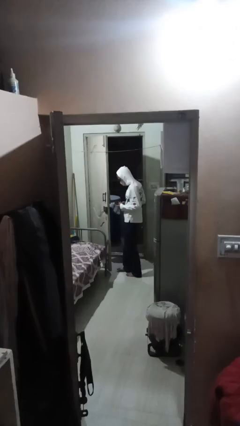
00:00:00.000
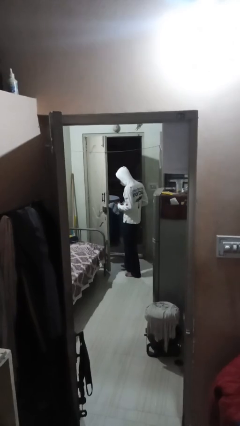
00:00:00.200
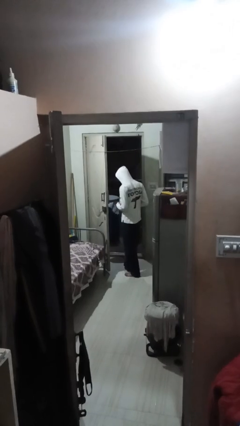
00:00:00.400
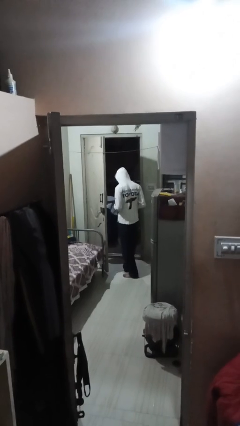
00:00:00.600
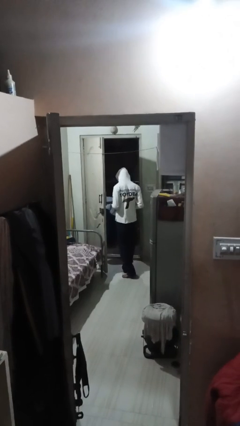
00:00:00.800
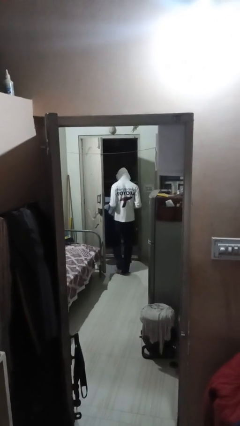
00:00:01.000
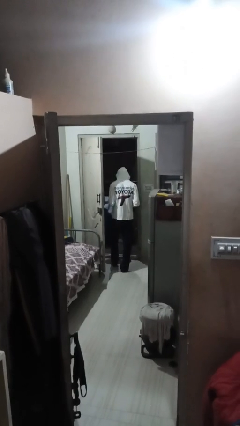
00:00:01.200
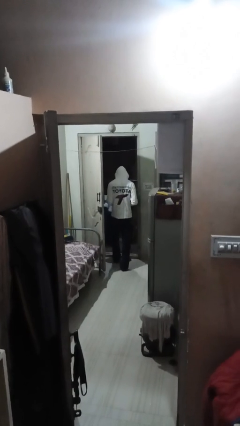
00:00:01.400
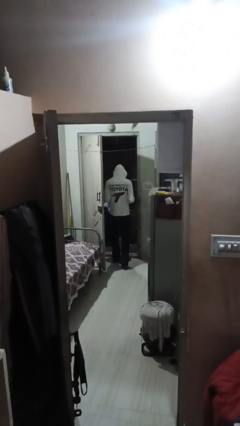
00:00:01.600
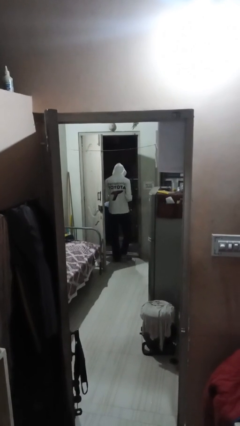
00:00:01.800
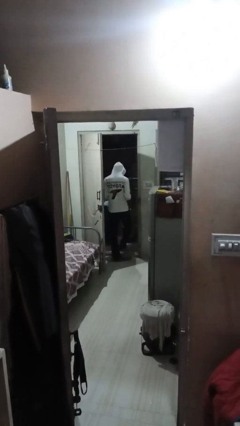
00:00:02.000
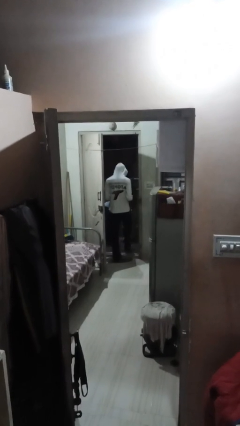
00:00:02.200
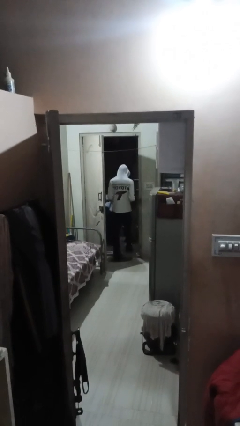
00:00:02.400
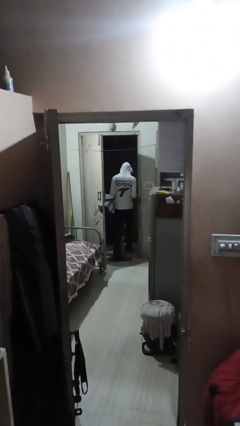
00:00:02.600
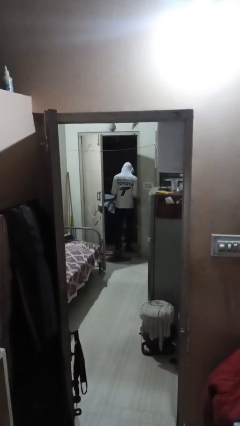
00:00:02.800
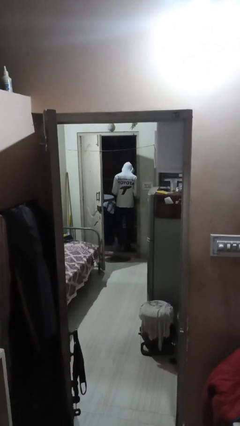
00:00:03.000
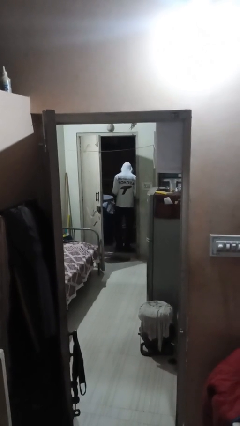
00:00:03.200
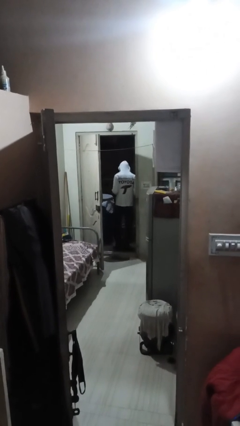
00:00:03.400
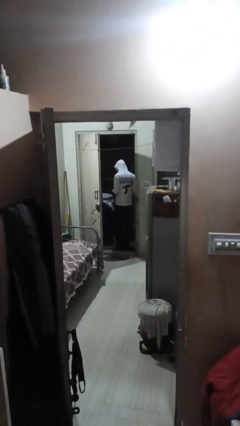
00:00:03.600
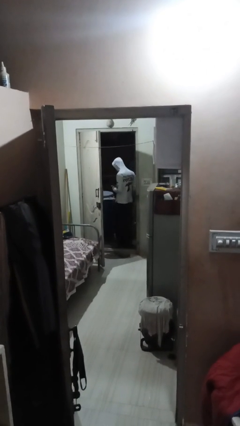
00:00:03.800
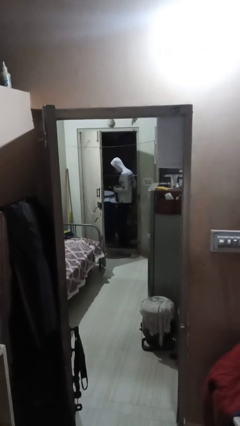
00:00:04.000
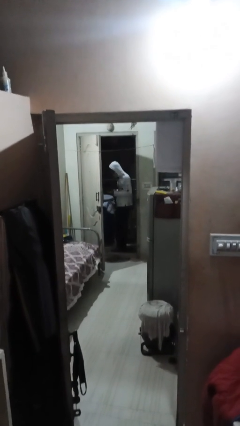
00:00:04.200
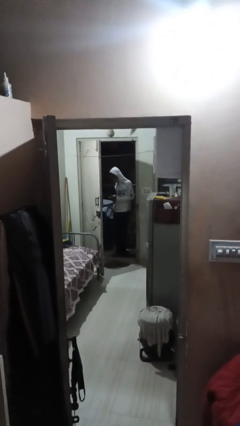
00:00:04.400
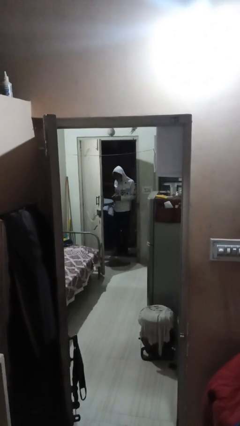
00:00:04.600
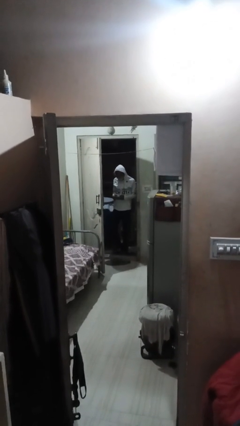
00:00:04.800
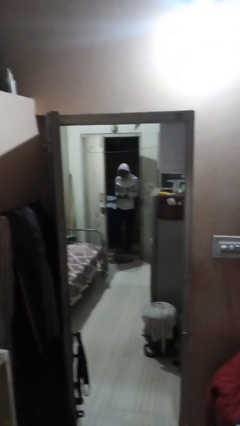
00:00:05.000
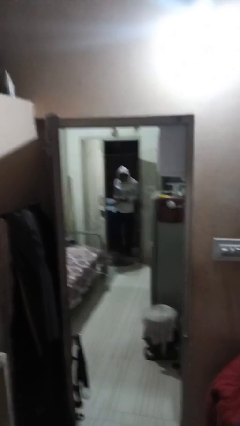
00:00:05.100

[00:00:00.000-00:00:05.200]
person exits scene through structure

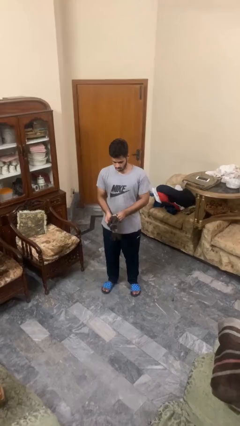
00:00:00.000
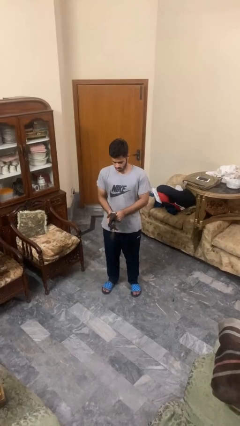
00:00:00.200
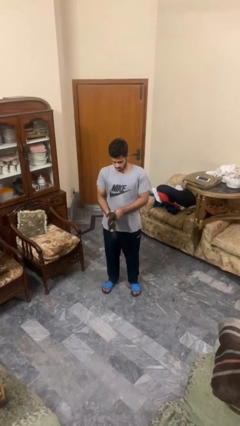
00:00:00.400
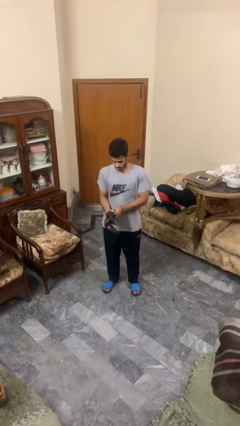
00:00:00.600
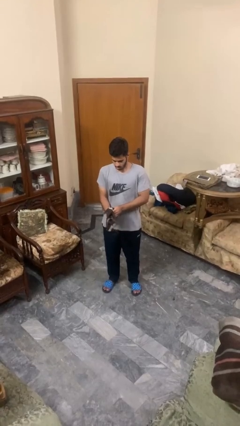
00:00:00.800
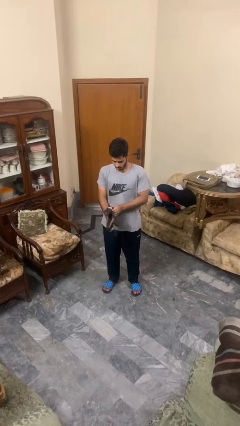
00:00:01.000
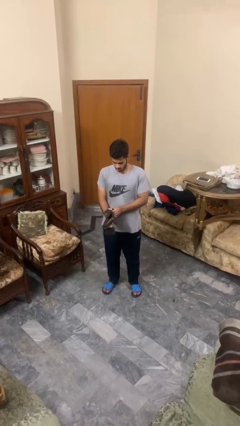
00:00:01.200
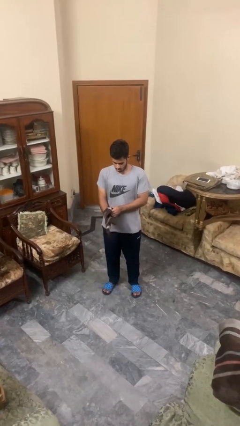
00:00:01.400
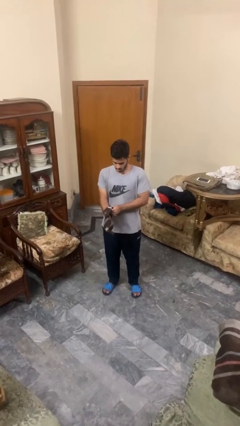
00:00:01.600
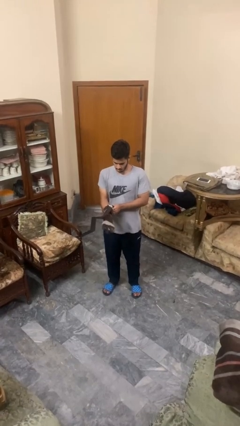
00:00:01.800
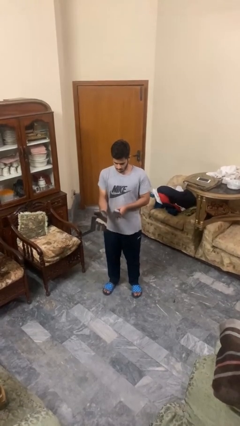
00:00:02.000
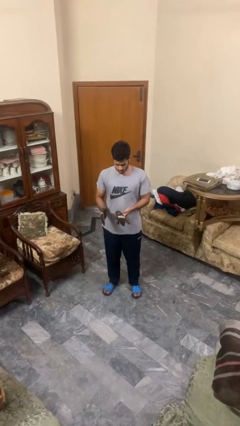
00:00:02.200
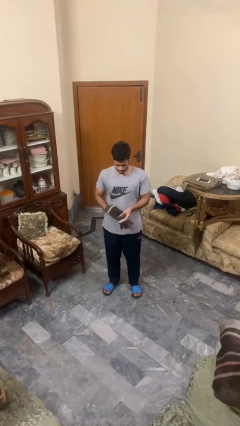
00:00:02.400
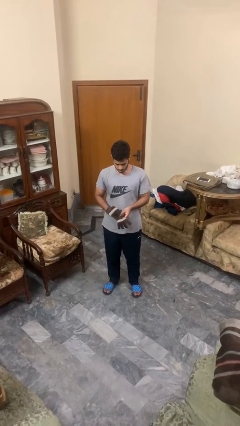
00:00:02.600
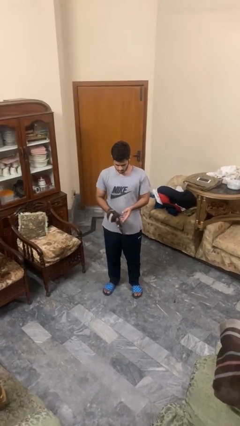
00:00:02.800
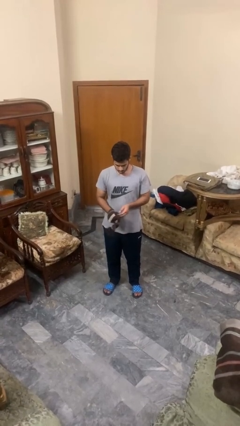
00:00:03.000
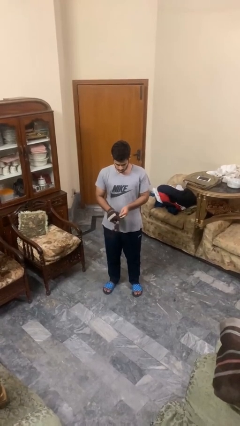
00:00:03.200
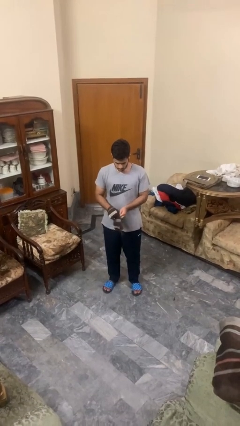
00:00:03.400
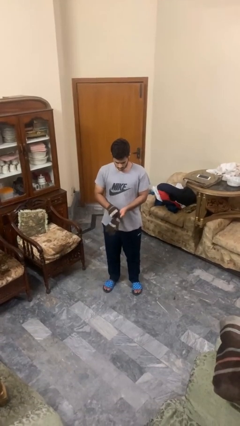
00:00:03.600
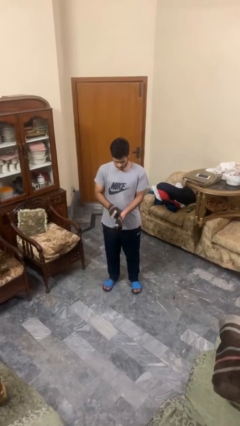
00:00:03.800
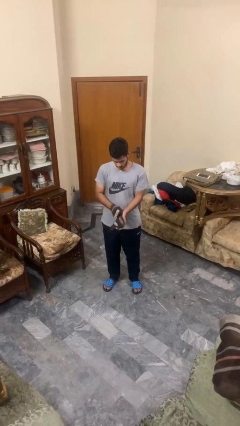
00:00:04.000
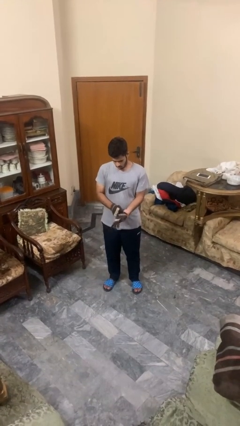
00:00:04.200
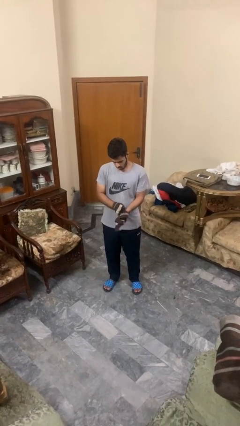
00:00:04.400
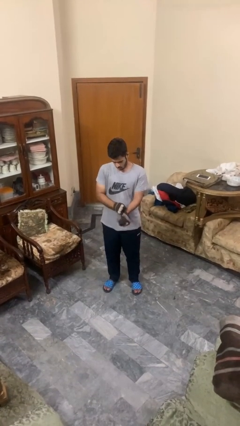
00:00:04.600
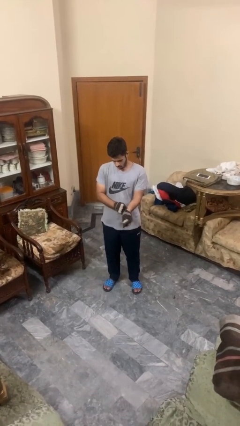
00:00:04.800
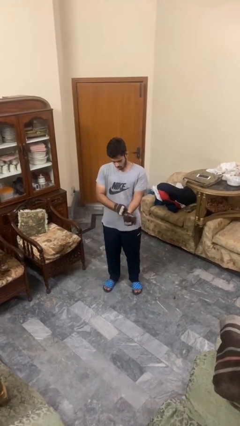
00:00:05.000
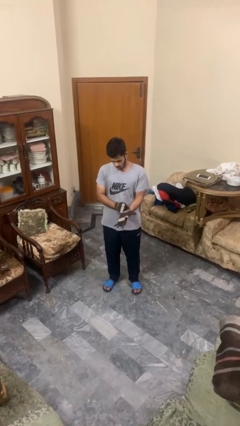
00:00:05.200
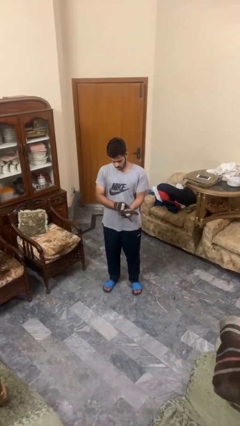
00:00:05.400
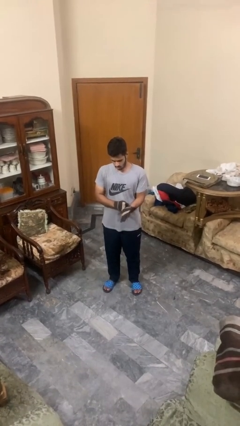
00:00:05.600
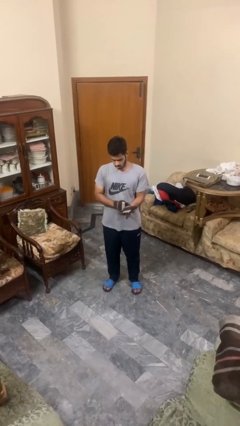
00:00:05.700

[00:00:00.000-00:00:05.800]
person puts on gloves

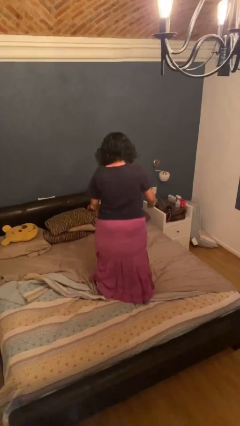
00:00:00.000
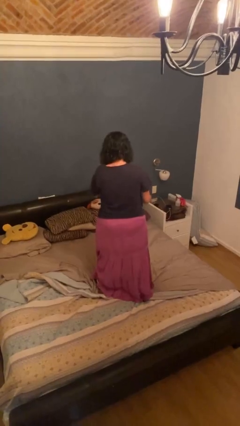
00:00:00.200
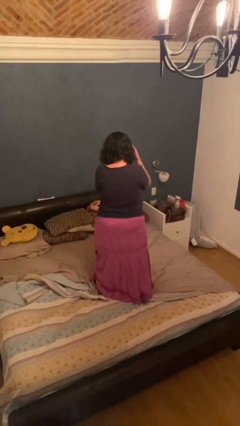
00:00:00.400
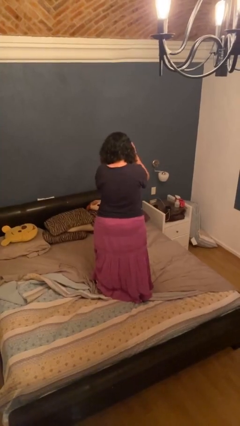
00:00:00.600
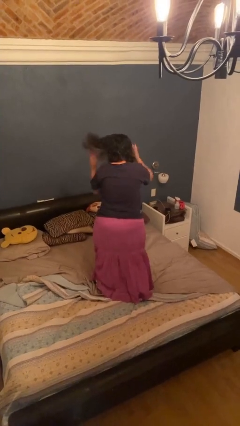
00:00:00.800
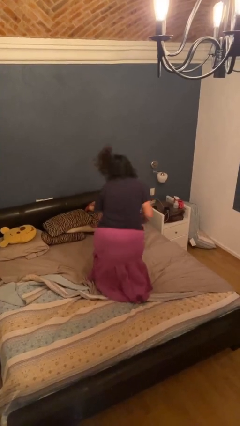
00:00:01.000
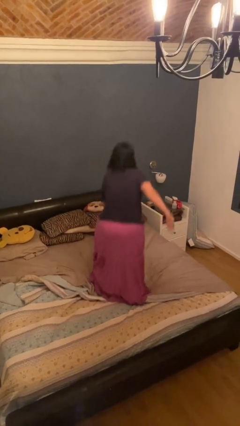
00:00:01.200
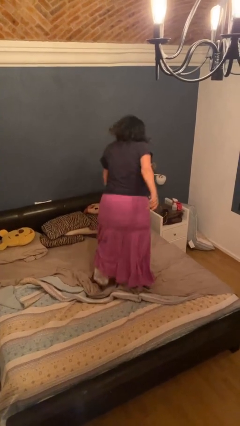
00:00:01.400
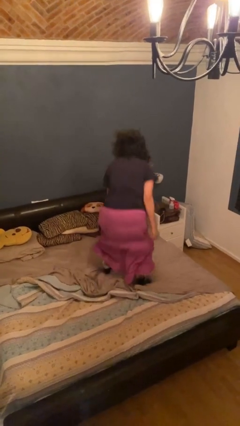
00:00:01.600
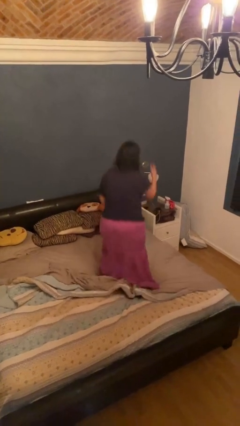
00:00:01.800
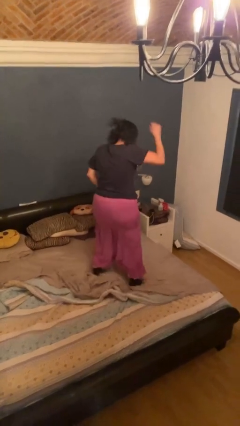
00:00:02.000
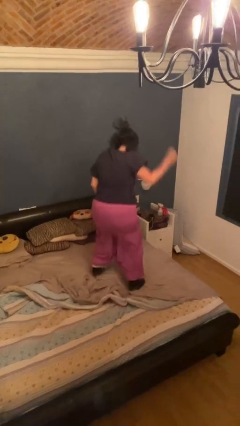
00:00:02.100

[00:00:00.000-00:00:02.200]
person jumps on bed

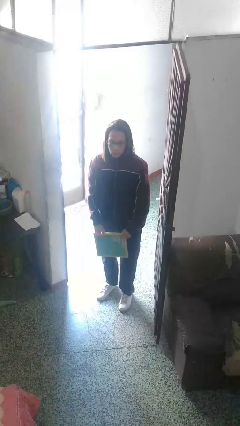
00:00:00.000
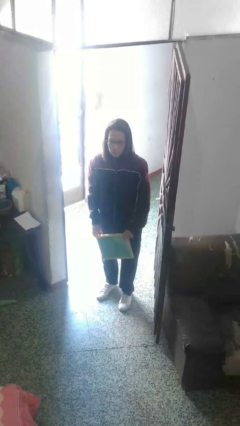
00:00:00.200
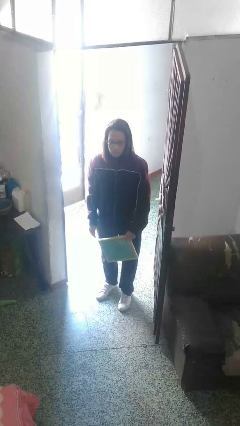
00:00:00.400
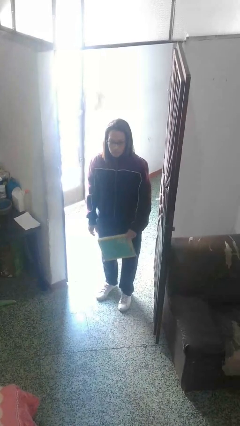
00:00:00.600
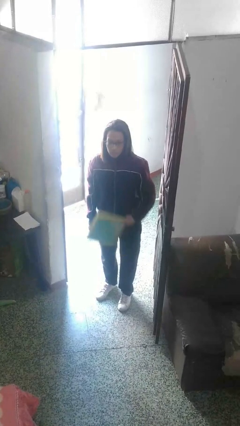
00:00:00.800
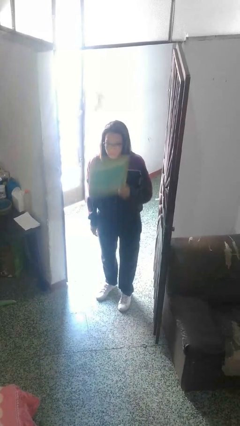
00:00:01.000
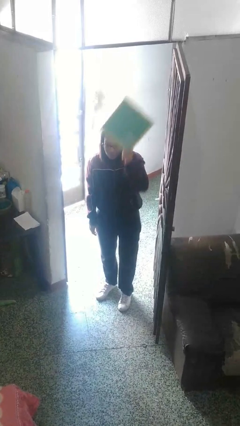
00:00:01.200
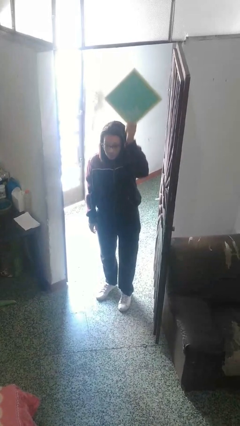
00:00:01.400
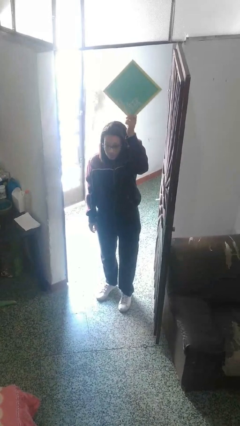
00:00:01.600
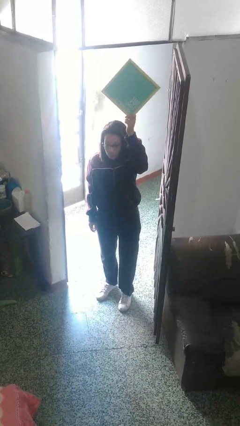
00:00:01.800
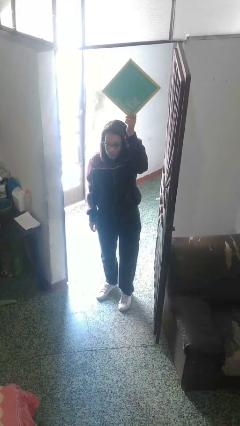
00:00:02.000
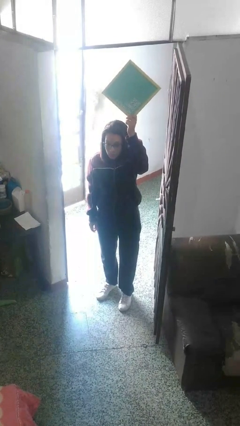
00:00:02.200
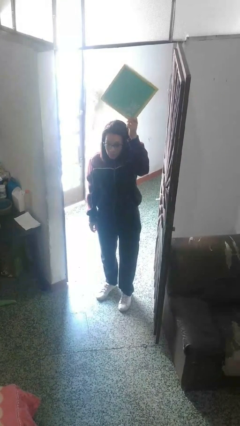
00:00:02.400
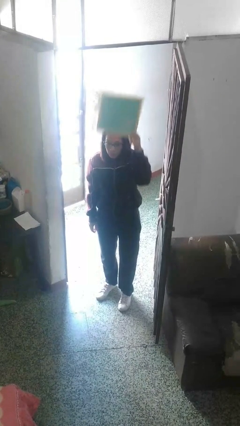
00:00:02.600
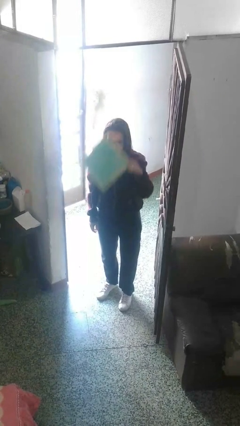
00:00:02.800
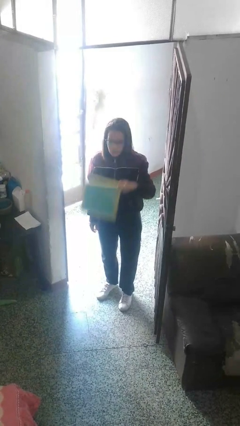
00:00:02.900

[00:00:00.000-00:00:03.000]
person holds object above head

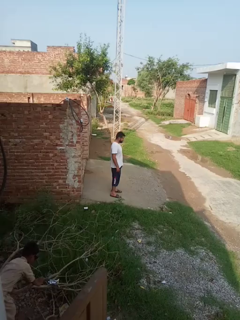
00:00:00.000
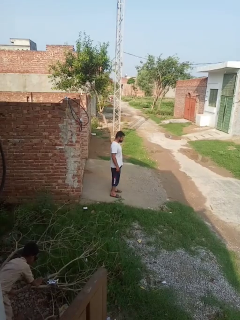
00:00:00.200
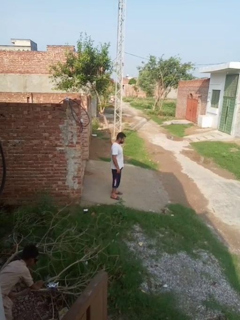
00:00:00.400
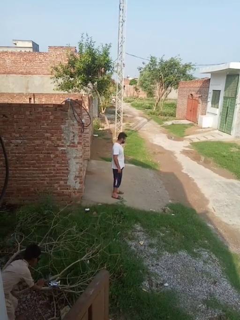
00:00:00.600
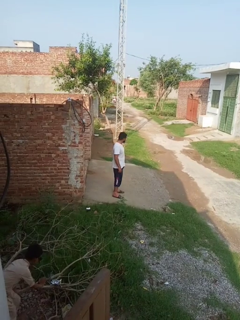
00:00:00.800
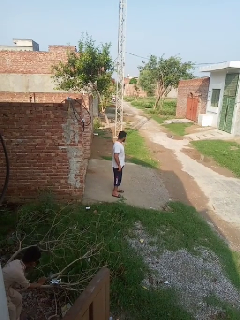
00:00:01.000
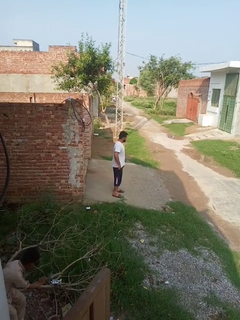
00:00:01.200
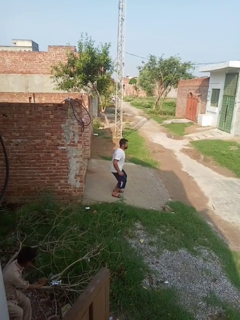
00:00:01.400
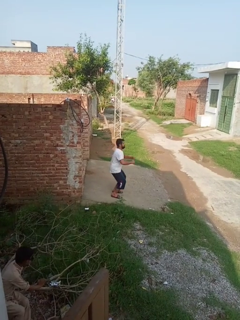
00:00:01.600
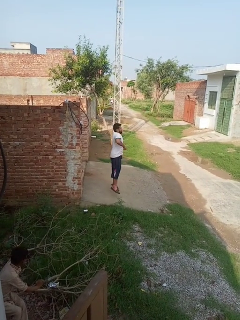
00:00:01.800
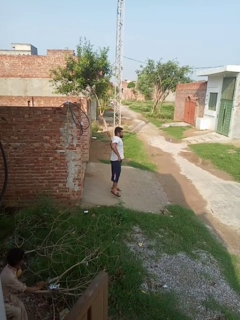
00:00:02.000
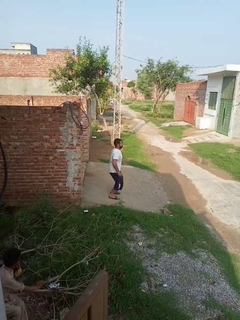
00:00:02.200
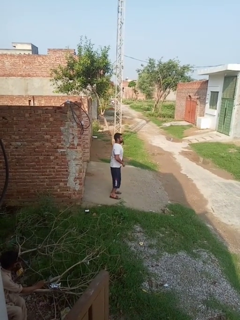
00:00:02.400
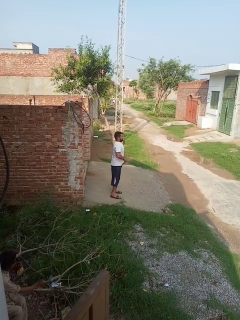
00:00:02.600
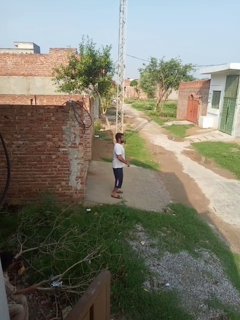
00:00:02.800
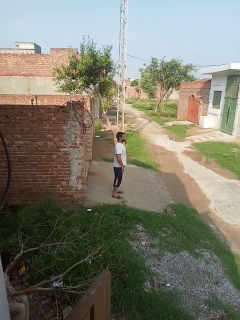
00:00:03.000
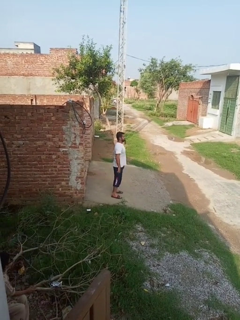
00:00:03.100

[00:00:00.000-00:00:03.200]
person jumps
